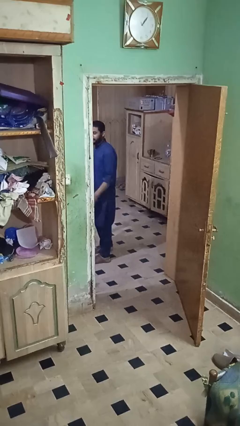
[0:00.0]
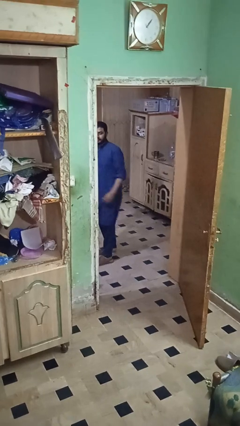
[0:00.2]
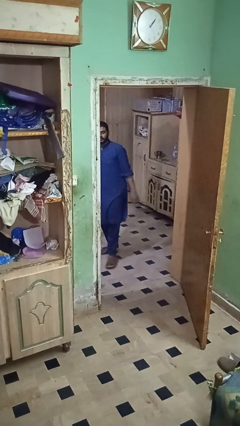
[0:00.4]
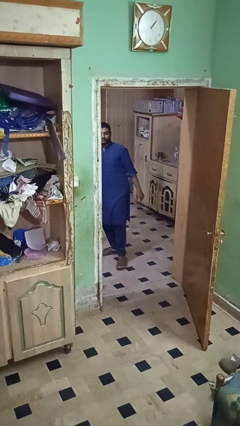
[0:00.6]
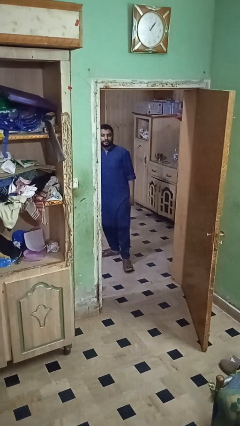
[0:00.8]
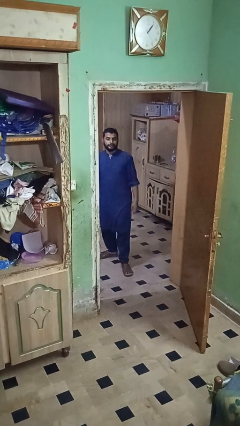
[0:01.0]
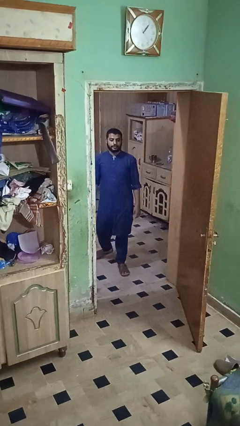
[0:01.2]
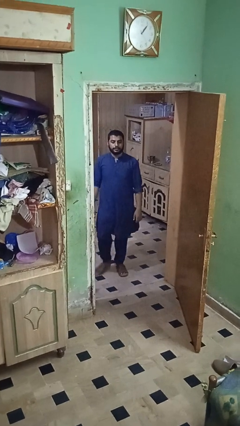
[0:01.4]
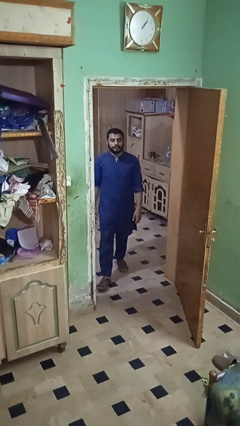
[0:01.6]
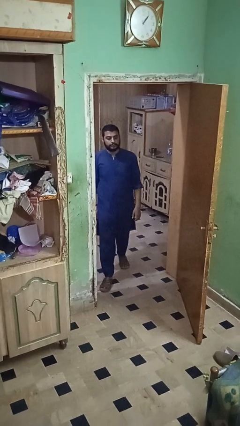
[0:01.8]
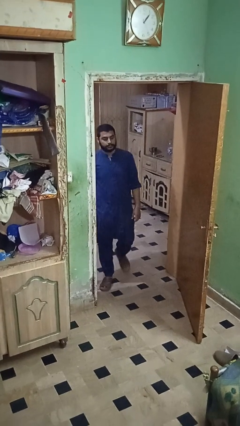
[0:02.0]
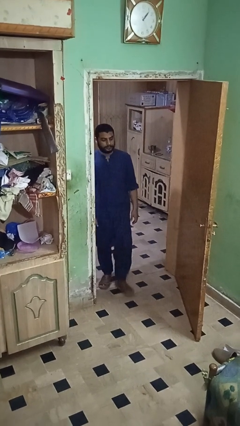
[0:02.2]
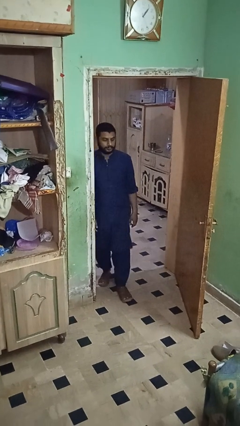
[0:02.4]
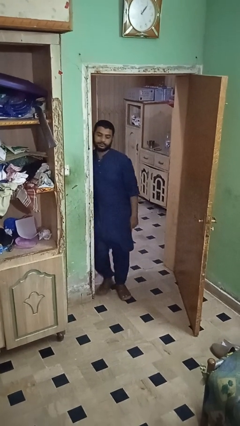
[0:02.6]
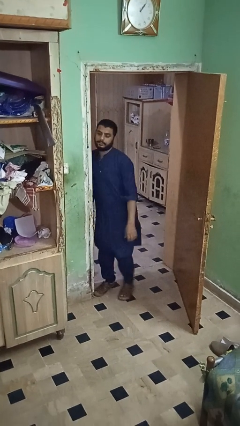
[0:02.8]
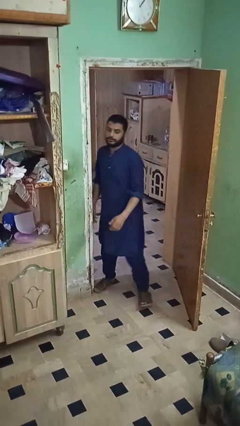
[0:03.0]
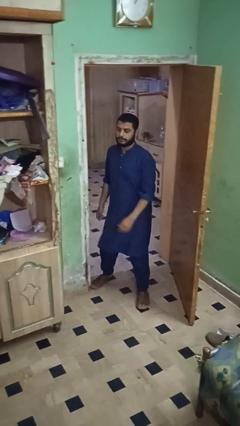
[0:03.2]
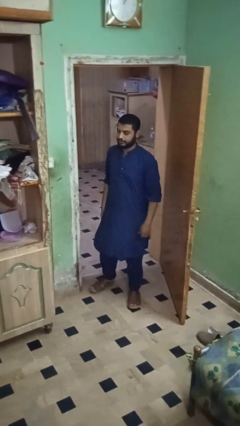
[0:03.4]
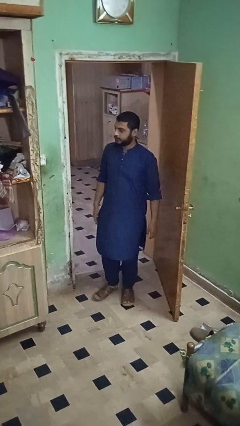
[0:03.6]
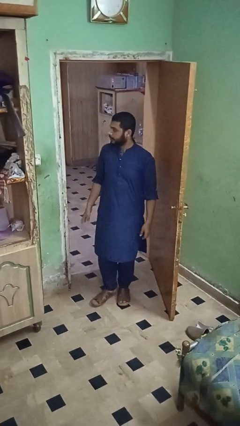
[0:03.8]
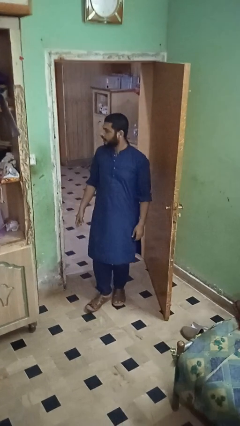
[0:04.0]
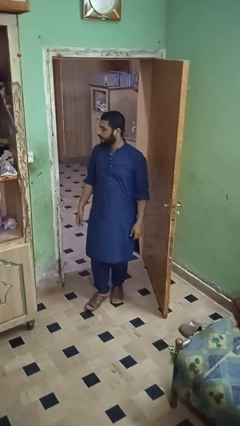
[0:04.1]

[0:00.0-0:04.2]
person bumps into wall

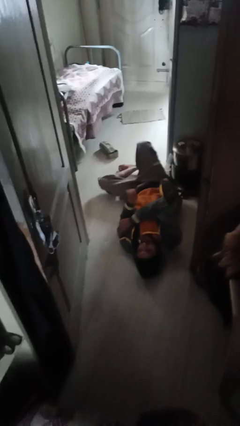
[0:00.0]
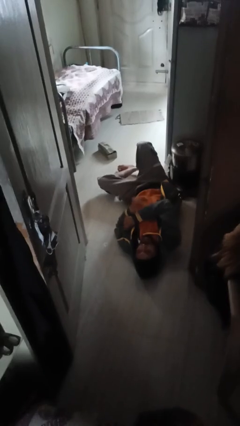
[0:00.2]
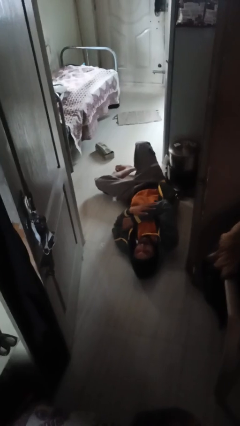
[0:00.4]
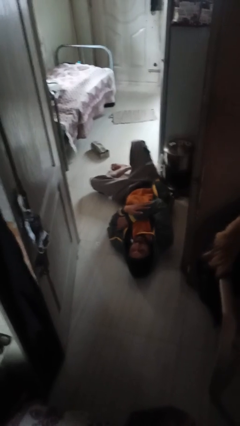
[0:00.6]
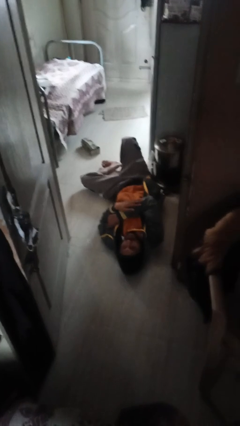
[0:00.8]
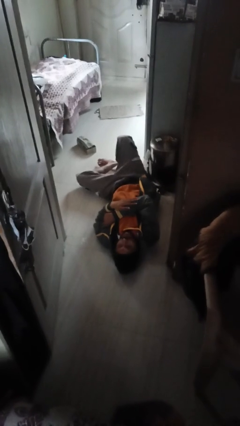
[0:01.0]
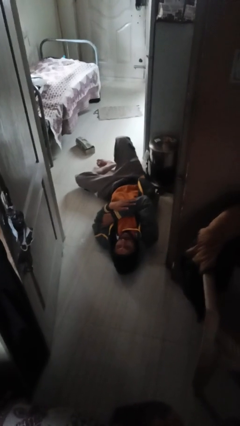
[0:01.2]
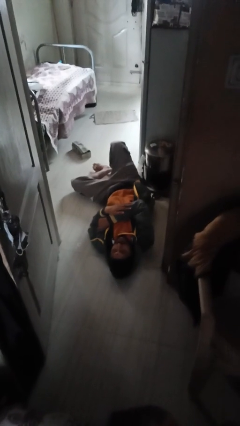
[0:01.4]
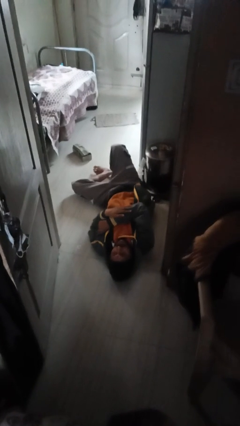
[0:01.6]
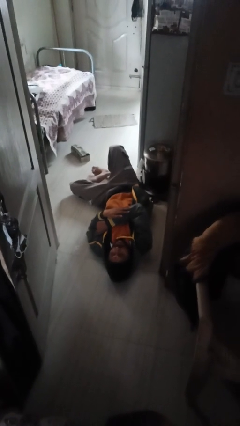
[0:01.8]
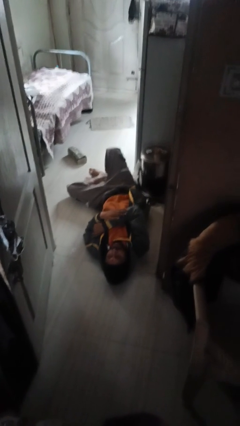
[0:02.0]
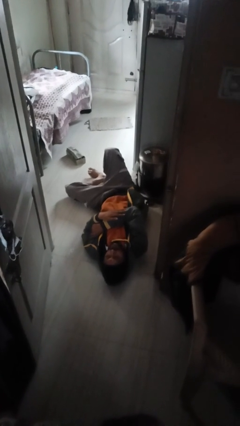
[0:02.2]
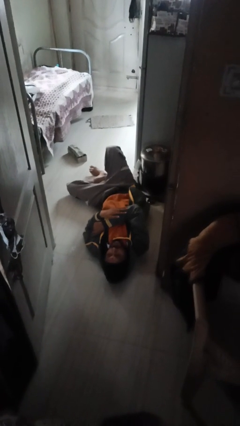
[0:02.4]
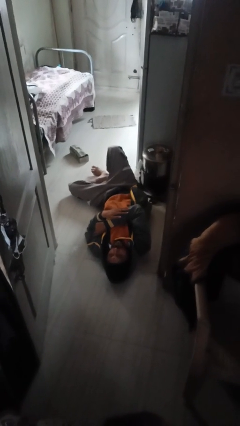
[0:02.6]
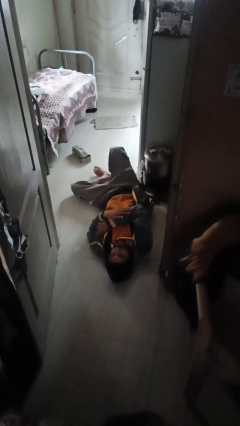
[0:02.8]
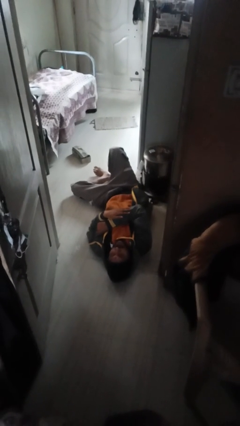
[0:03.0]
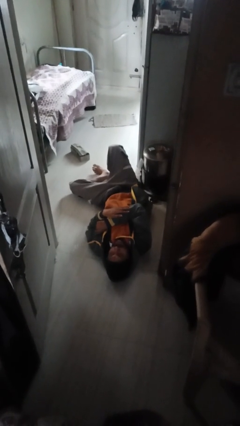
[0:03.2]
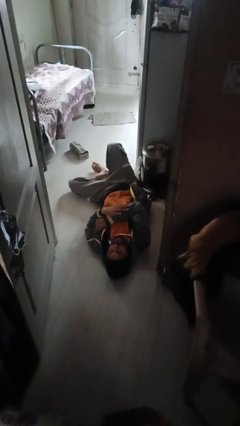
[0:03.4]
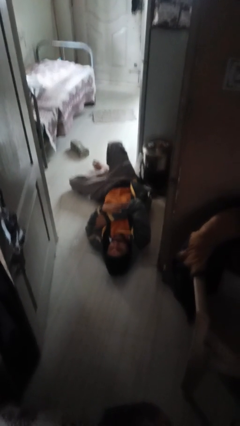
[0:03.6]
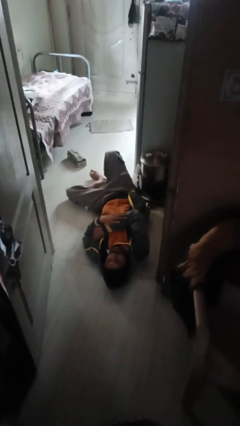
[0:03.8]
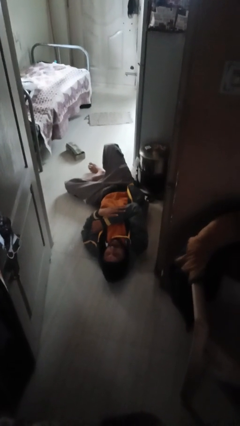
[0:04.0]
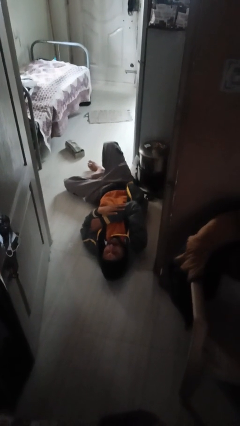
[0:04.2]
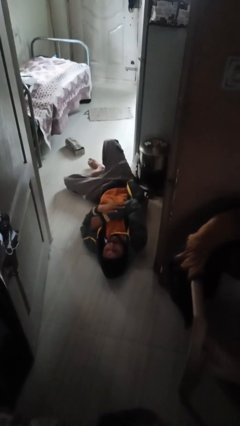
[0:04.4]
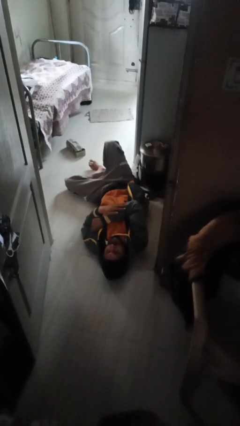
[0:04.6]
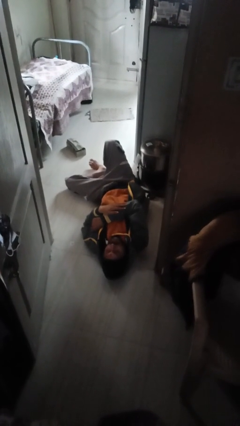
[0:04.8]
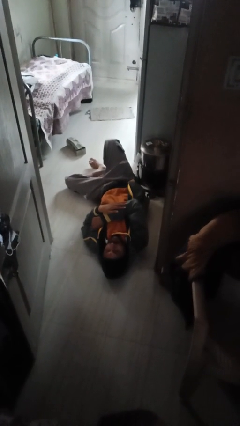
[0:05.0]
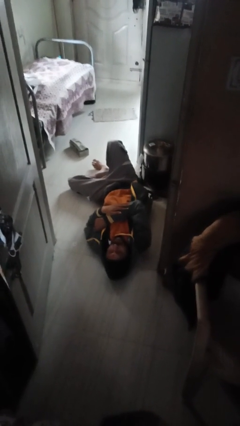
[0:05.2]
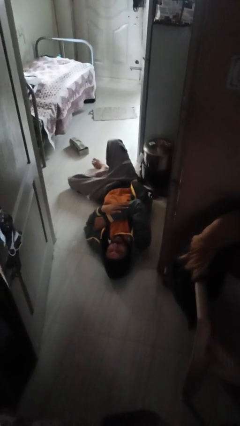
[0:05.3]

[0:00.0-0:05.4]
person lies down on floor

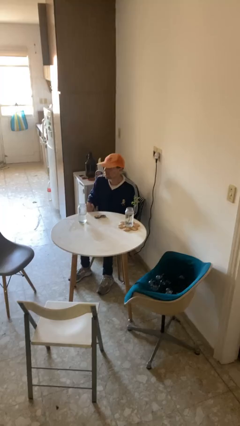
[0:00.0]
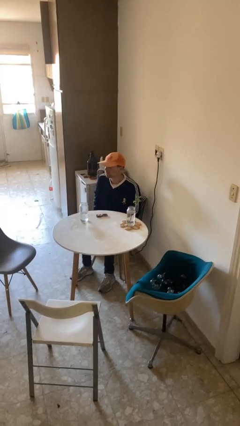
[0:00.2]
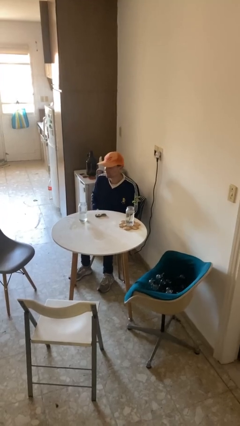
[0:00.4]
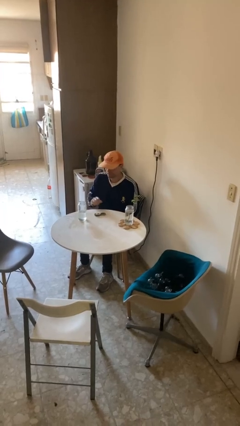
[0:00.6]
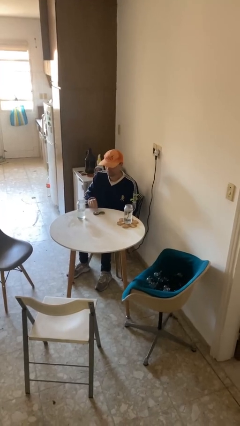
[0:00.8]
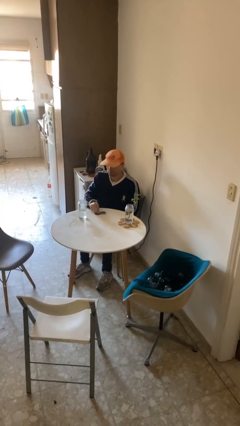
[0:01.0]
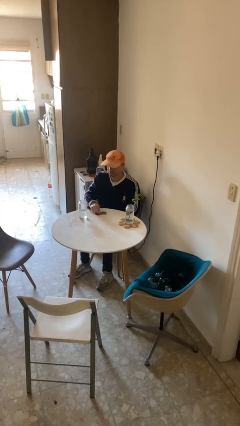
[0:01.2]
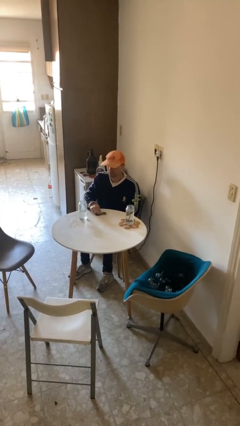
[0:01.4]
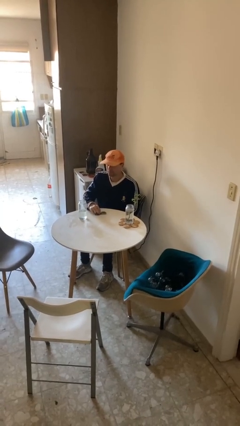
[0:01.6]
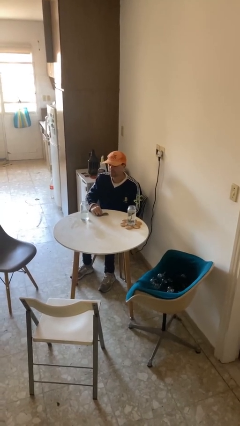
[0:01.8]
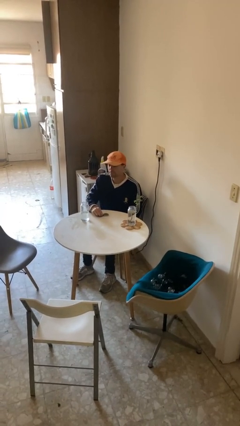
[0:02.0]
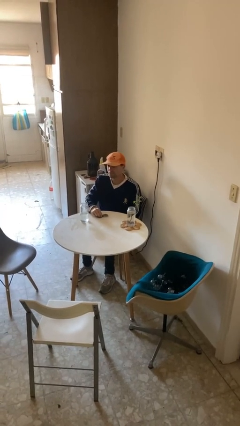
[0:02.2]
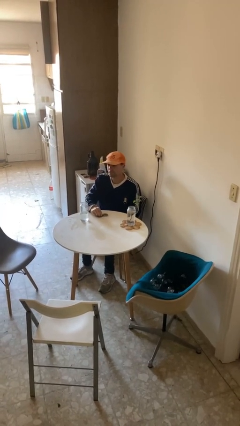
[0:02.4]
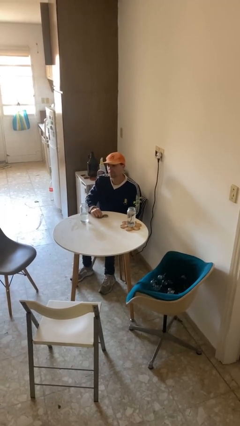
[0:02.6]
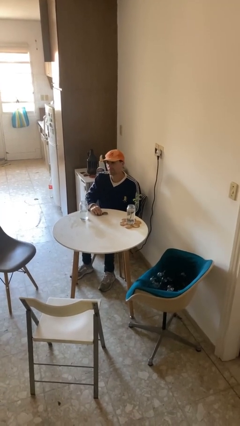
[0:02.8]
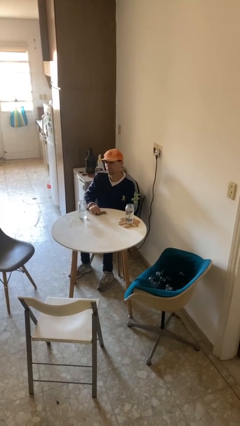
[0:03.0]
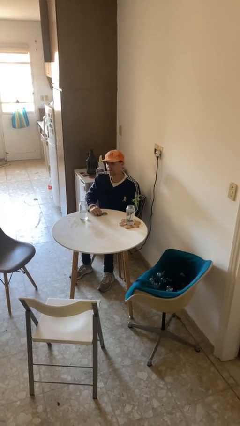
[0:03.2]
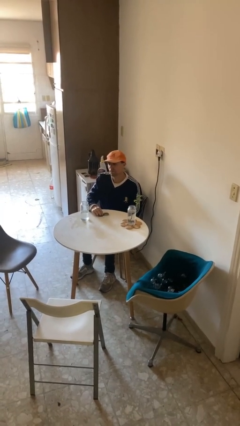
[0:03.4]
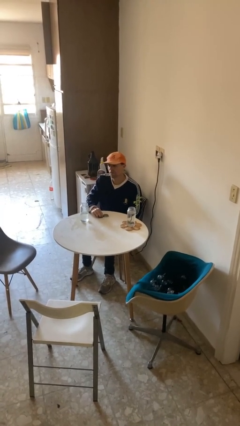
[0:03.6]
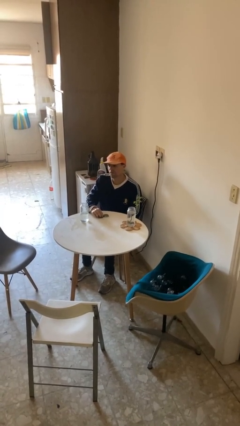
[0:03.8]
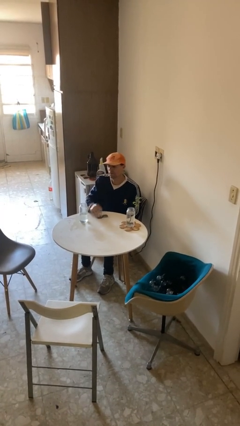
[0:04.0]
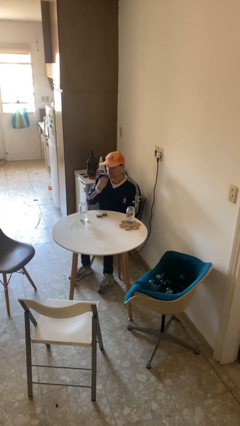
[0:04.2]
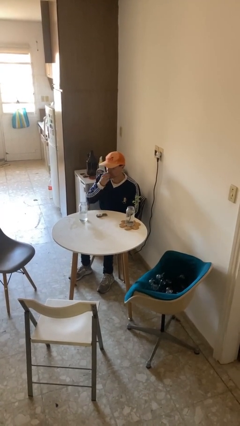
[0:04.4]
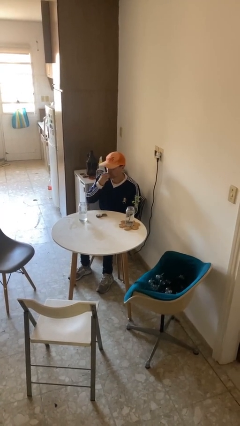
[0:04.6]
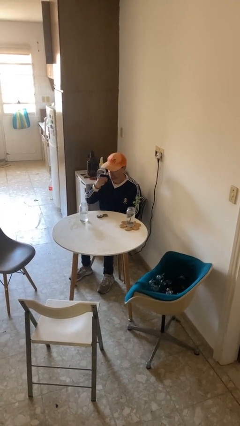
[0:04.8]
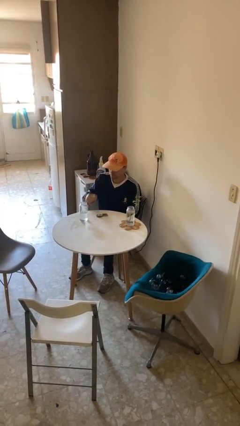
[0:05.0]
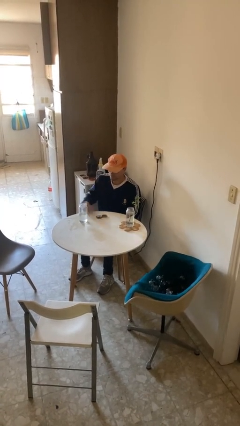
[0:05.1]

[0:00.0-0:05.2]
person takes medicine pills

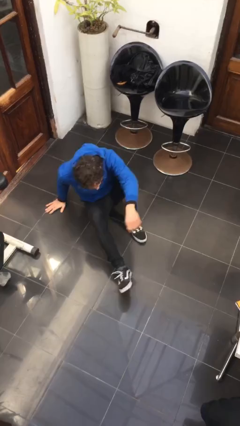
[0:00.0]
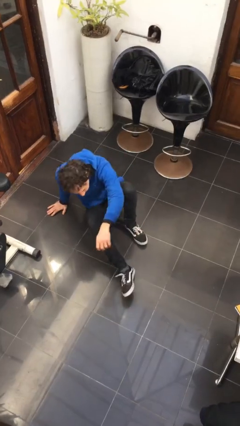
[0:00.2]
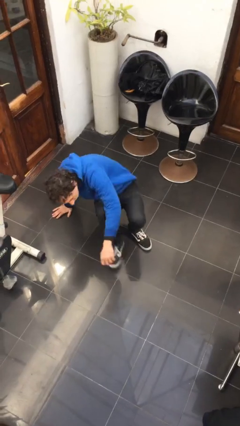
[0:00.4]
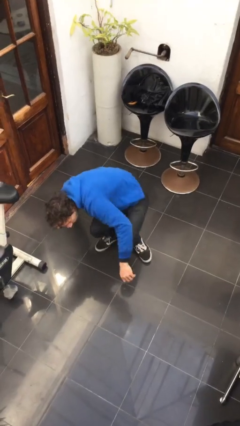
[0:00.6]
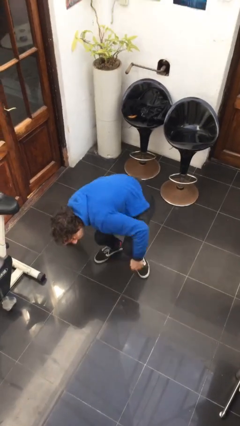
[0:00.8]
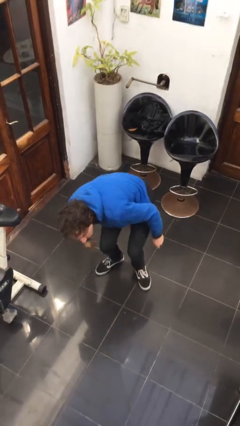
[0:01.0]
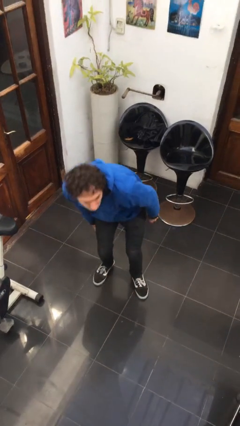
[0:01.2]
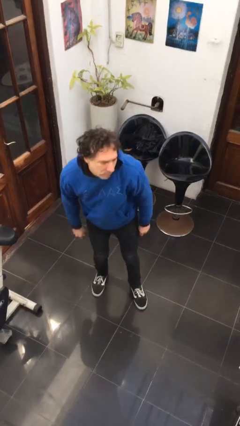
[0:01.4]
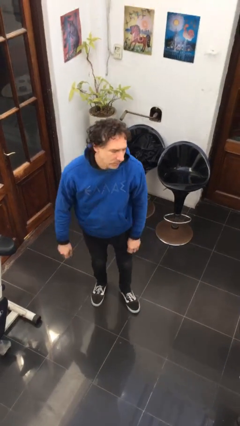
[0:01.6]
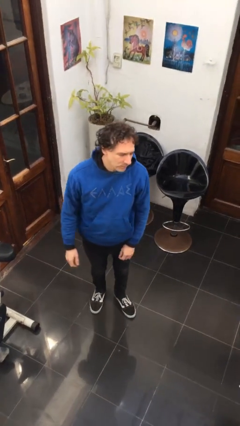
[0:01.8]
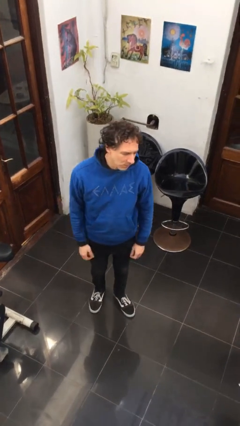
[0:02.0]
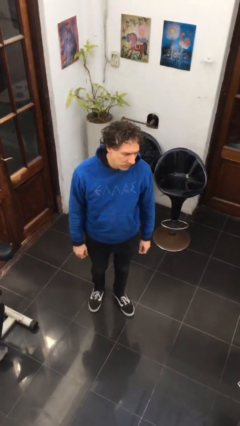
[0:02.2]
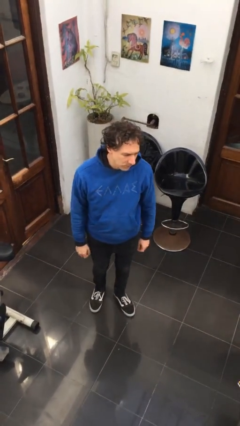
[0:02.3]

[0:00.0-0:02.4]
person stands up from floor

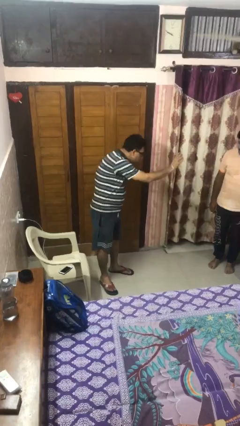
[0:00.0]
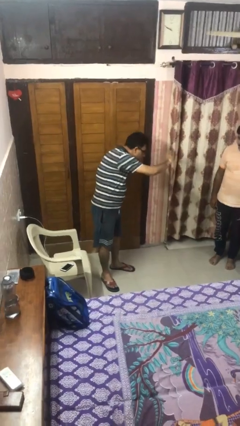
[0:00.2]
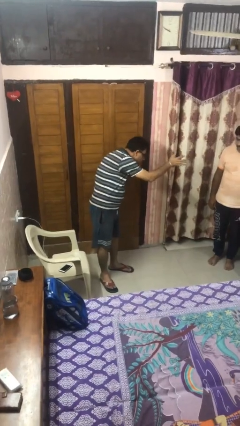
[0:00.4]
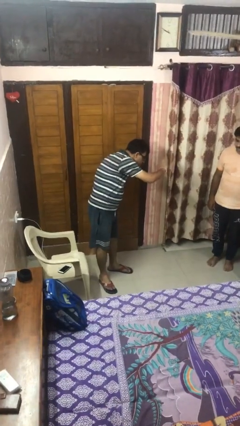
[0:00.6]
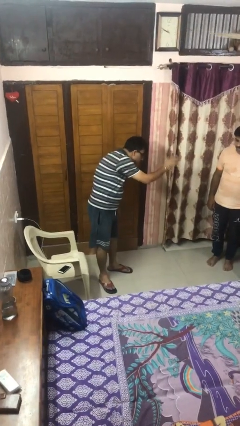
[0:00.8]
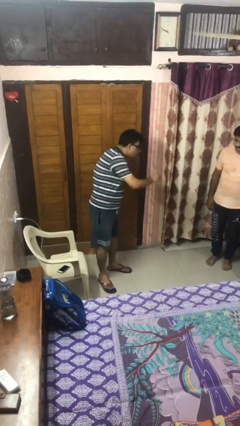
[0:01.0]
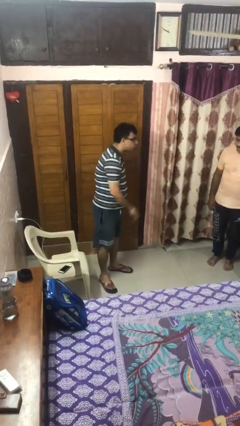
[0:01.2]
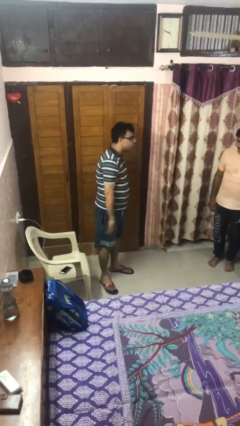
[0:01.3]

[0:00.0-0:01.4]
person waves at person
